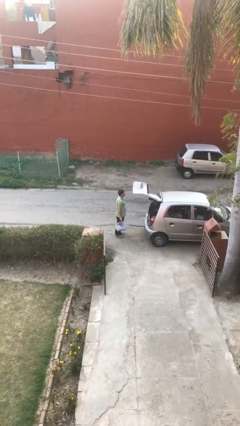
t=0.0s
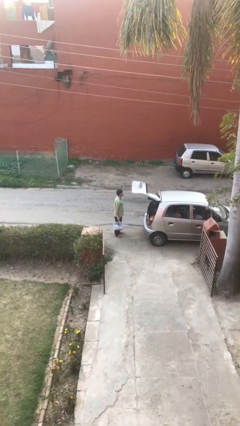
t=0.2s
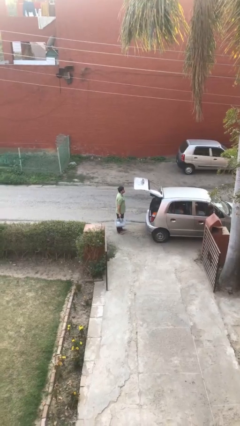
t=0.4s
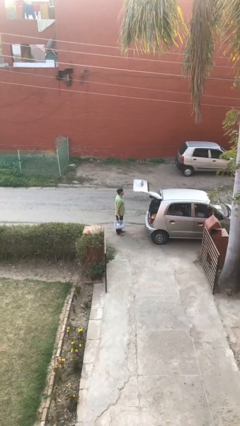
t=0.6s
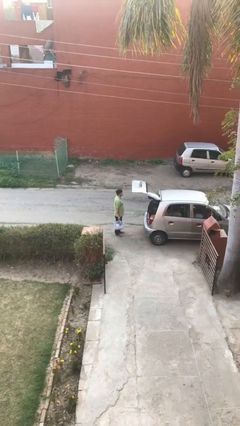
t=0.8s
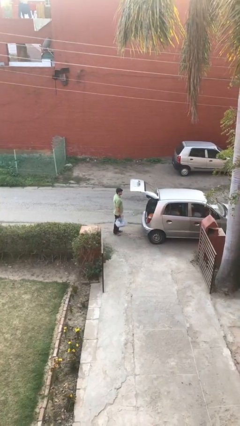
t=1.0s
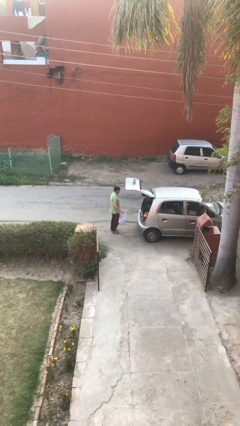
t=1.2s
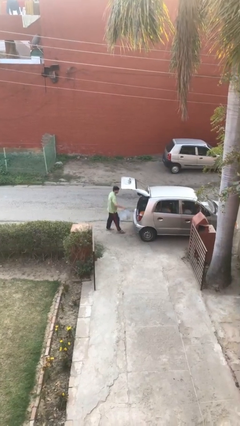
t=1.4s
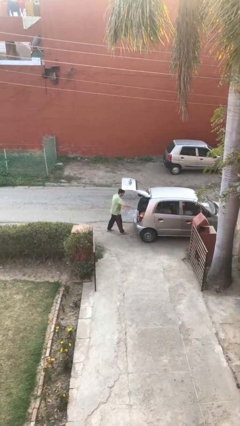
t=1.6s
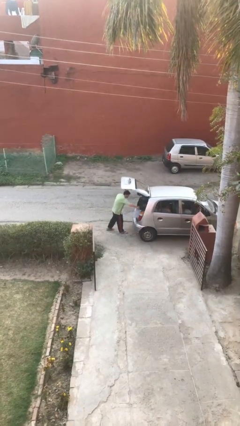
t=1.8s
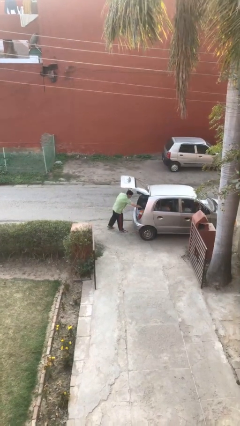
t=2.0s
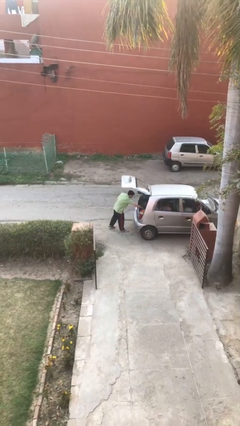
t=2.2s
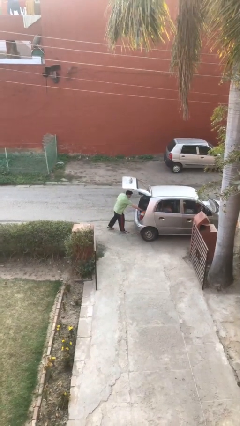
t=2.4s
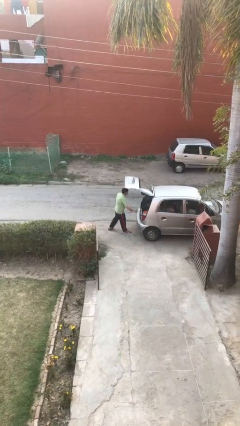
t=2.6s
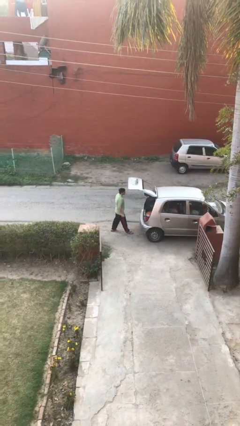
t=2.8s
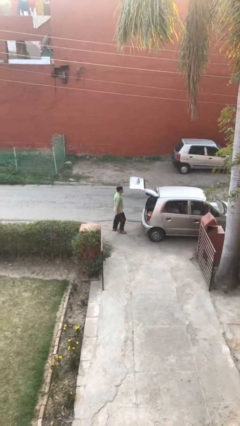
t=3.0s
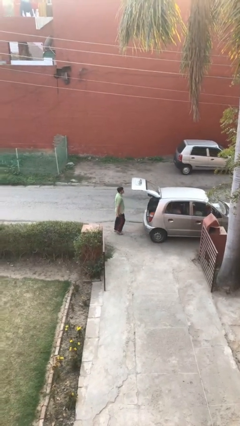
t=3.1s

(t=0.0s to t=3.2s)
person loads car

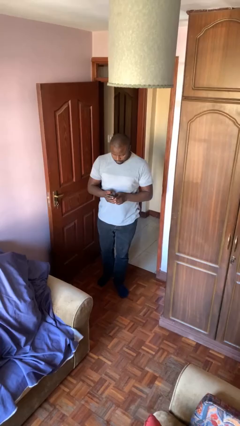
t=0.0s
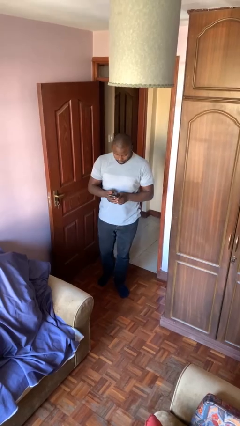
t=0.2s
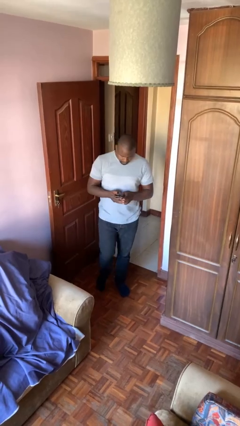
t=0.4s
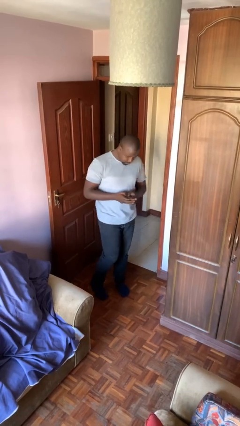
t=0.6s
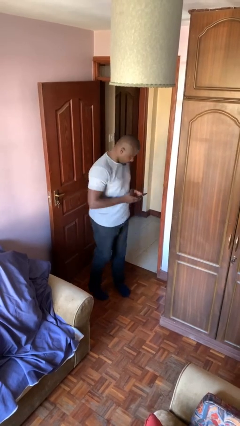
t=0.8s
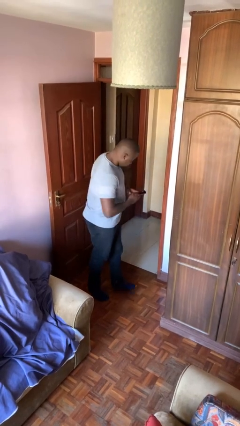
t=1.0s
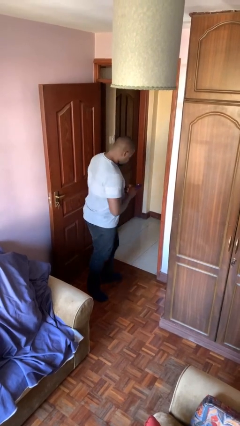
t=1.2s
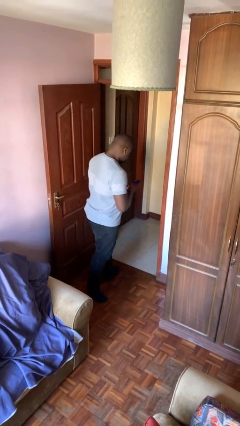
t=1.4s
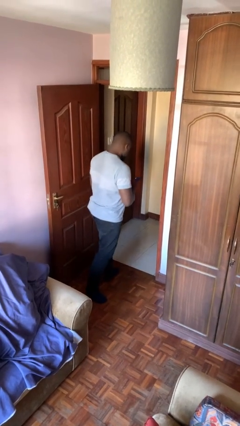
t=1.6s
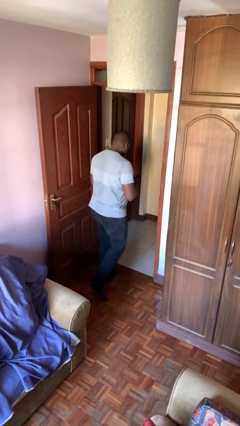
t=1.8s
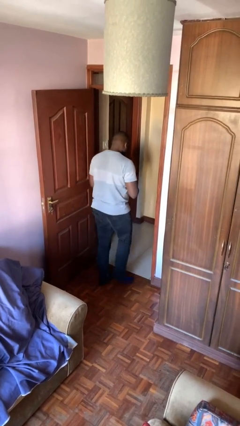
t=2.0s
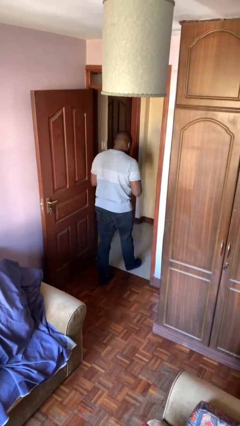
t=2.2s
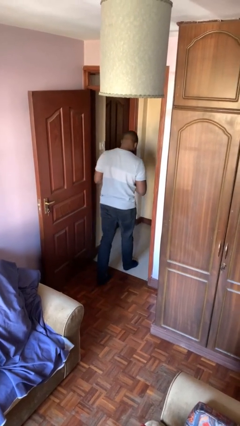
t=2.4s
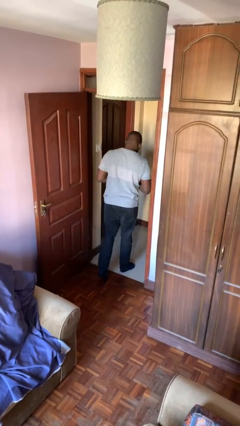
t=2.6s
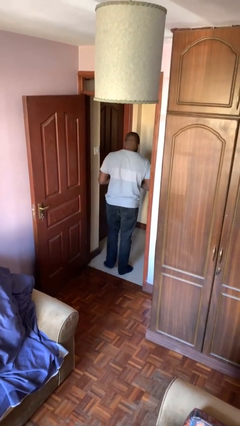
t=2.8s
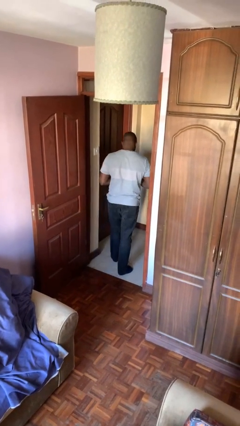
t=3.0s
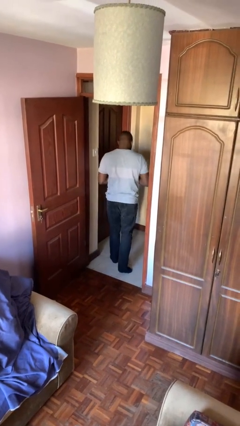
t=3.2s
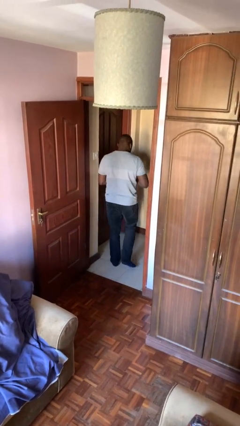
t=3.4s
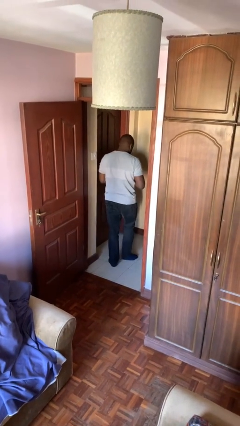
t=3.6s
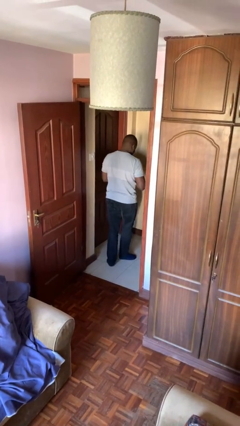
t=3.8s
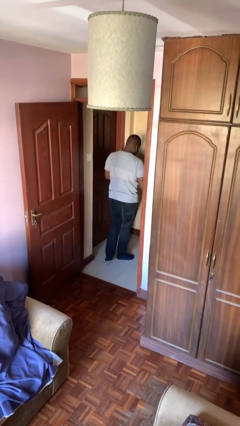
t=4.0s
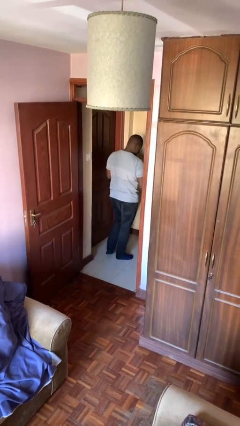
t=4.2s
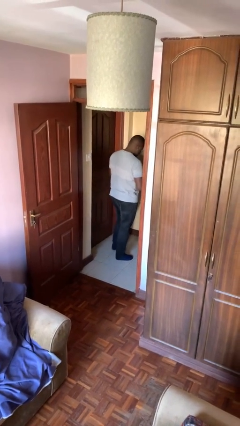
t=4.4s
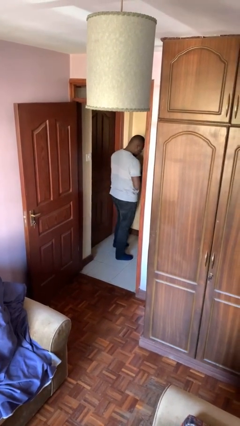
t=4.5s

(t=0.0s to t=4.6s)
person exits scene through structure

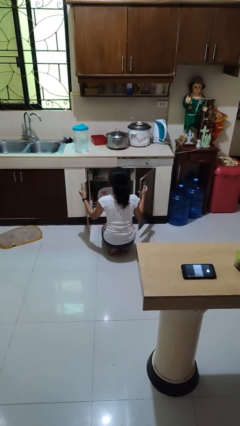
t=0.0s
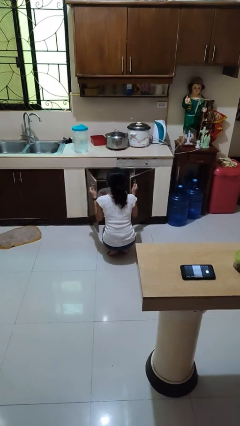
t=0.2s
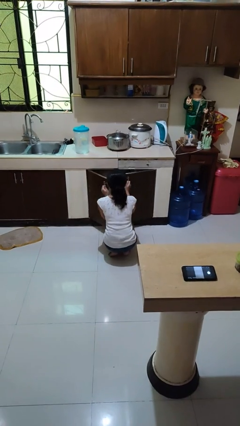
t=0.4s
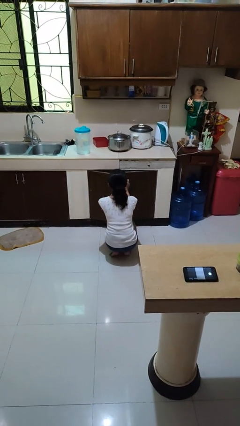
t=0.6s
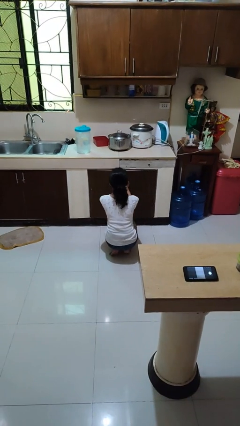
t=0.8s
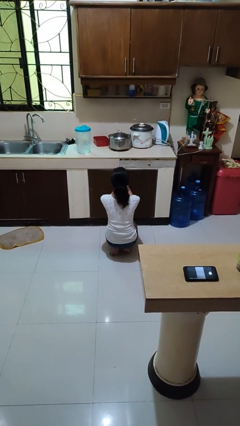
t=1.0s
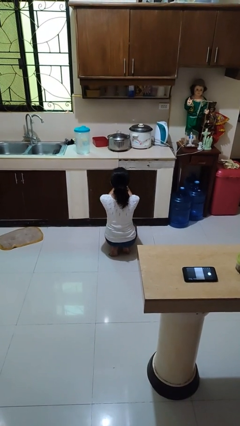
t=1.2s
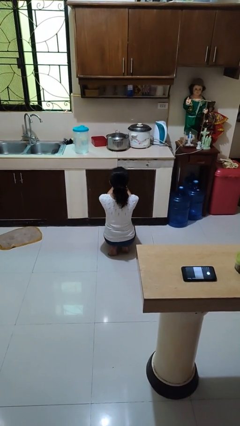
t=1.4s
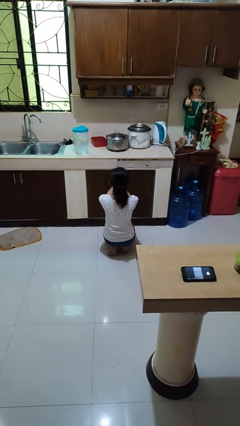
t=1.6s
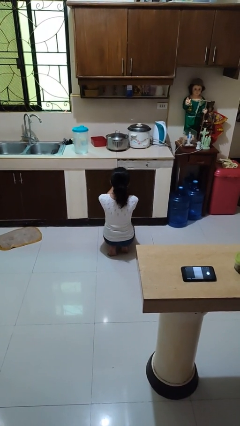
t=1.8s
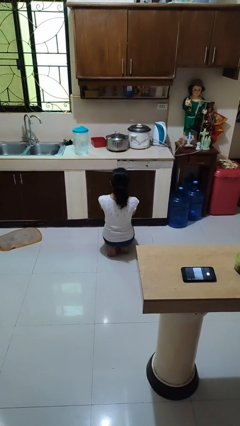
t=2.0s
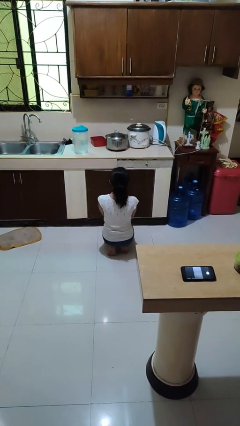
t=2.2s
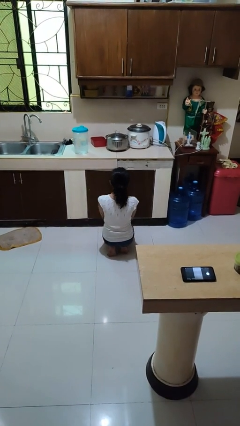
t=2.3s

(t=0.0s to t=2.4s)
person closes dishwasher

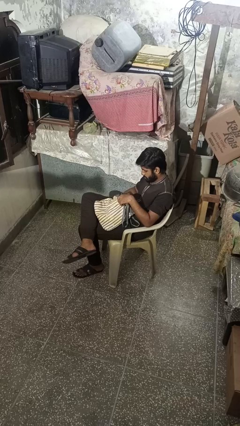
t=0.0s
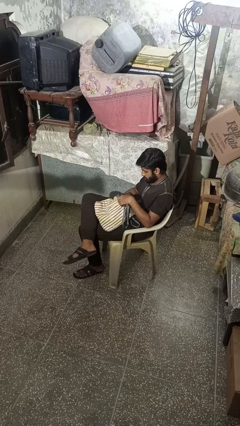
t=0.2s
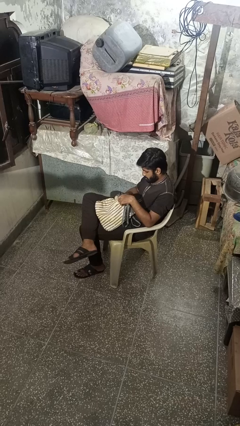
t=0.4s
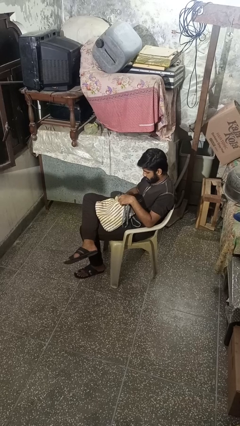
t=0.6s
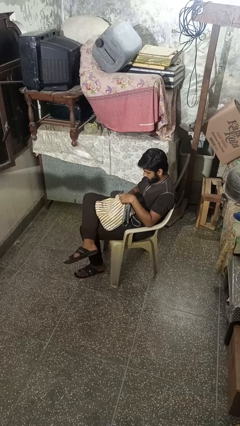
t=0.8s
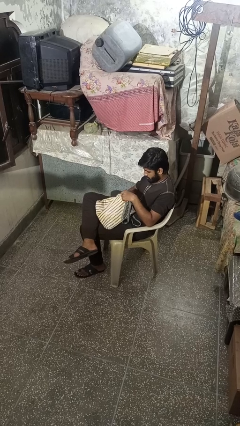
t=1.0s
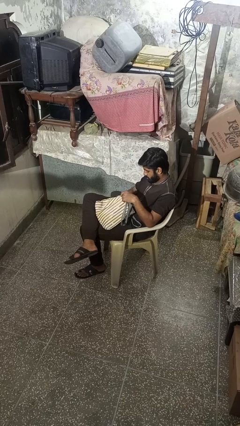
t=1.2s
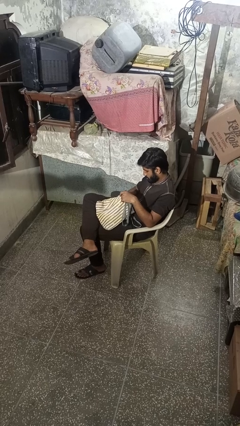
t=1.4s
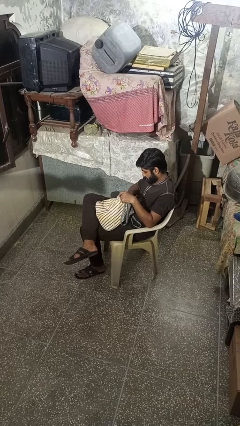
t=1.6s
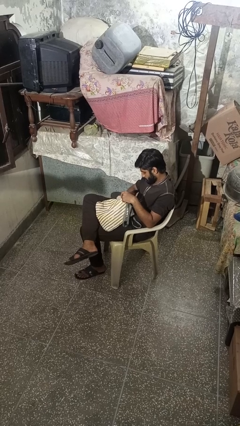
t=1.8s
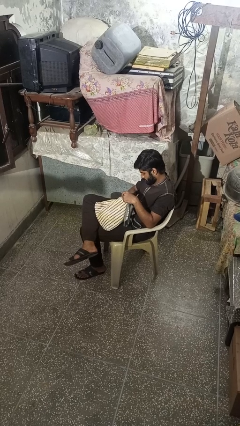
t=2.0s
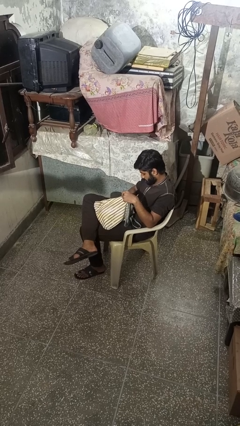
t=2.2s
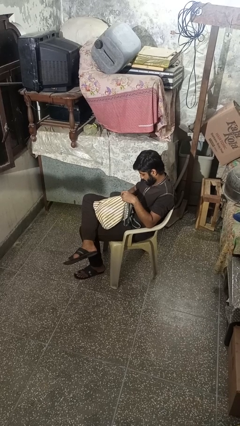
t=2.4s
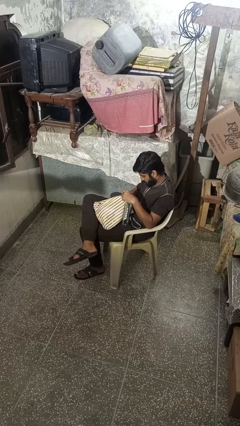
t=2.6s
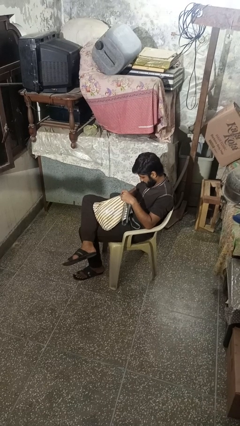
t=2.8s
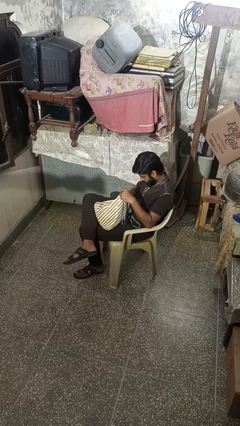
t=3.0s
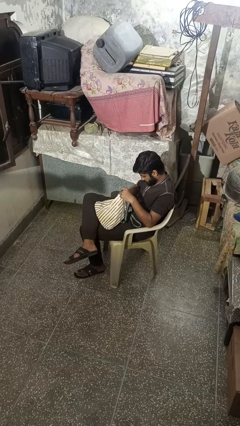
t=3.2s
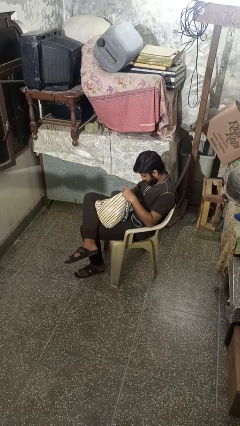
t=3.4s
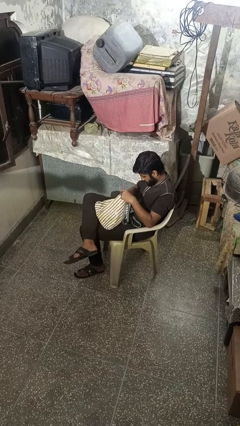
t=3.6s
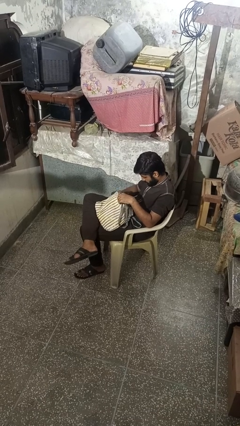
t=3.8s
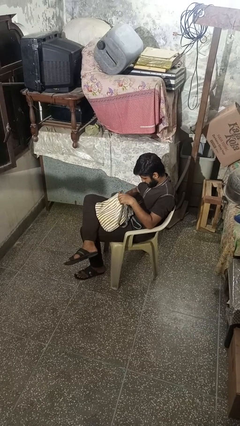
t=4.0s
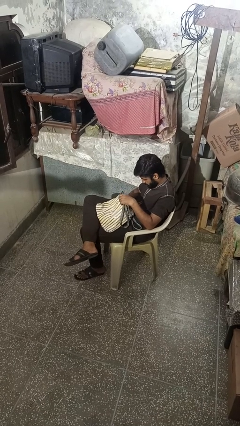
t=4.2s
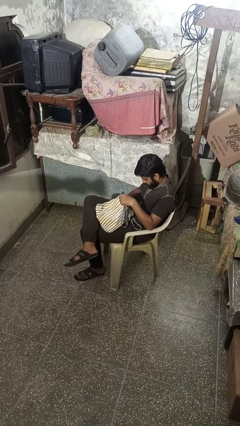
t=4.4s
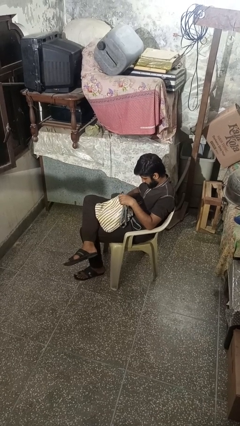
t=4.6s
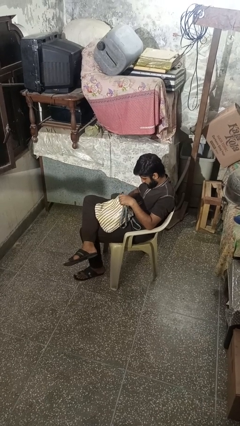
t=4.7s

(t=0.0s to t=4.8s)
person searches in purse

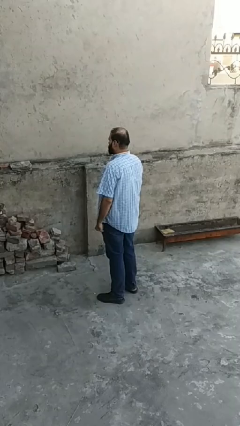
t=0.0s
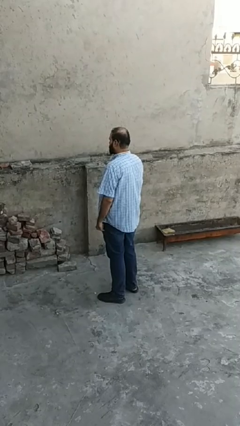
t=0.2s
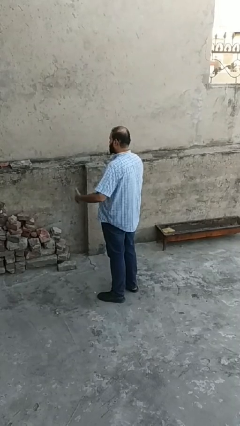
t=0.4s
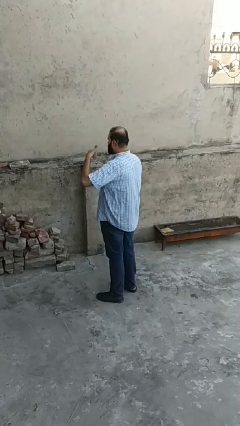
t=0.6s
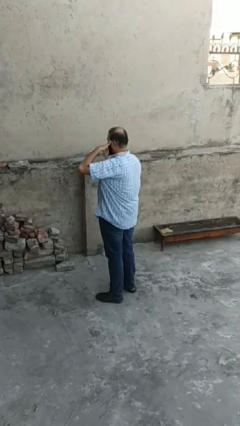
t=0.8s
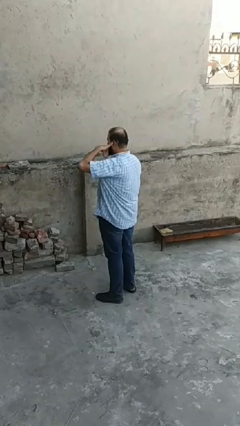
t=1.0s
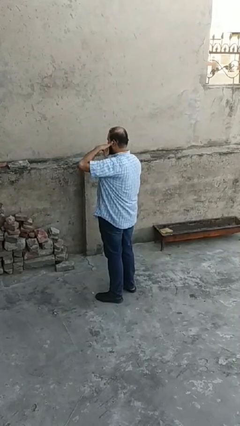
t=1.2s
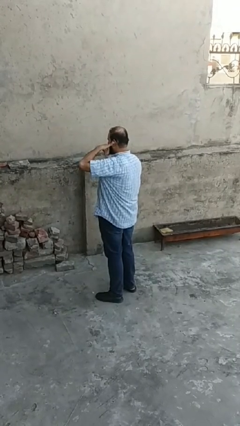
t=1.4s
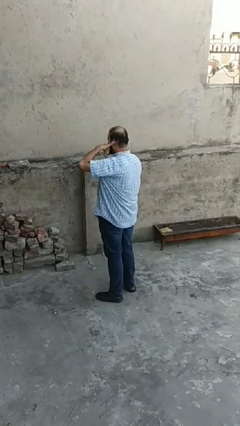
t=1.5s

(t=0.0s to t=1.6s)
person gestures call me

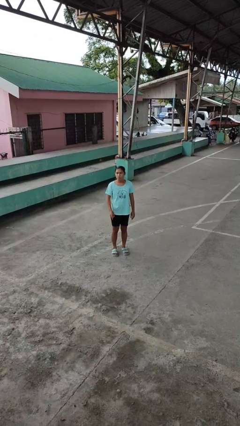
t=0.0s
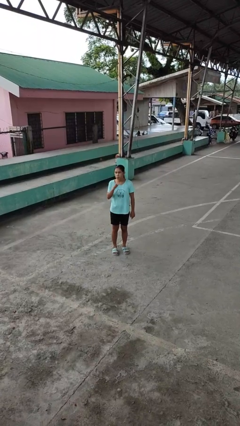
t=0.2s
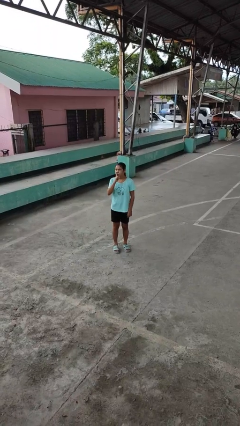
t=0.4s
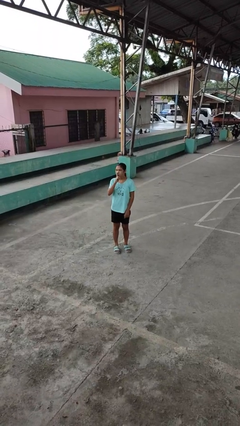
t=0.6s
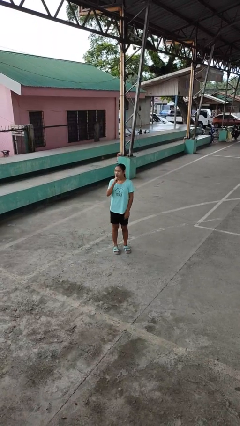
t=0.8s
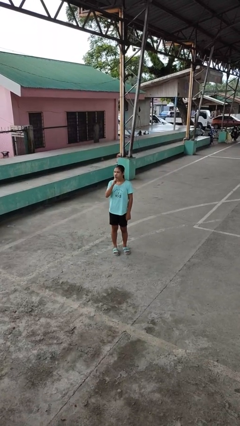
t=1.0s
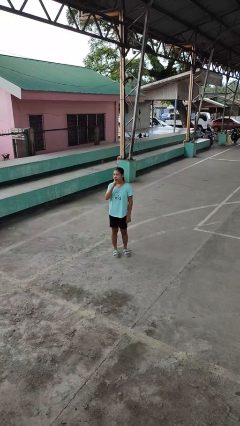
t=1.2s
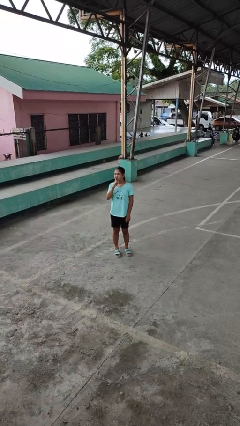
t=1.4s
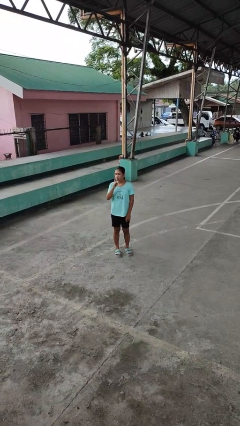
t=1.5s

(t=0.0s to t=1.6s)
person gestures be quiet
